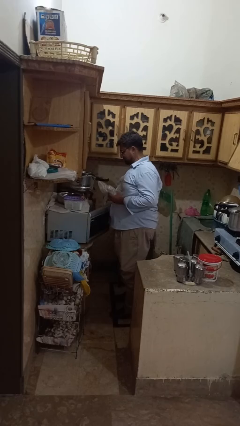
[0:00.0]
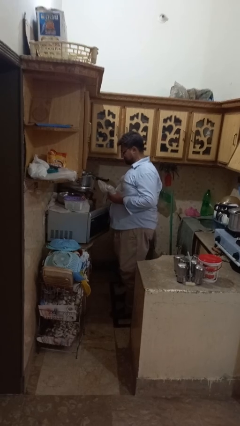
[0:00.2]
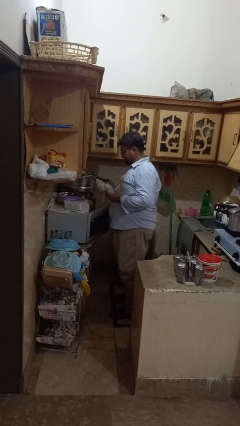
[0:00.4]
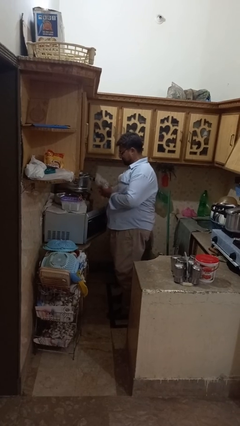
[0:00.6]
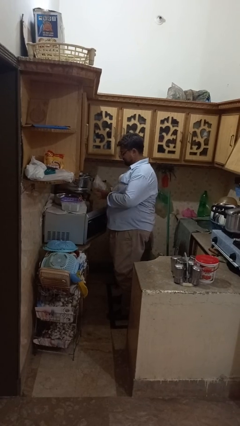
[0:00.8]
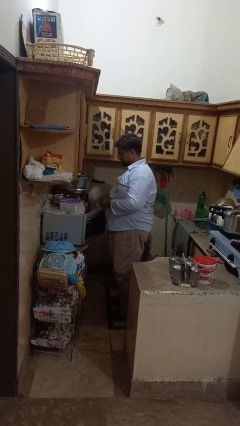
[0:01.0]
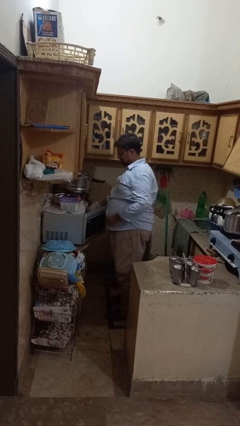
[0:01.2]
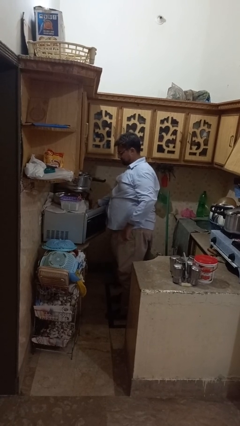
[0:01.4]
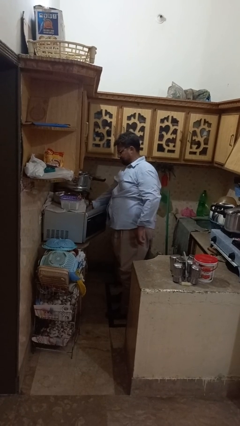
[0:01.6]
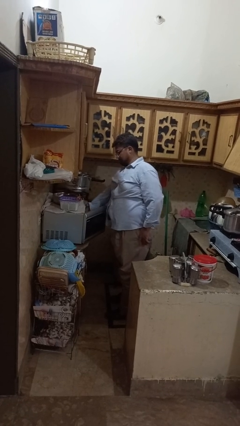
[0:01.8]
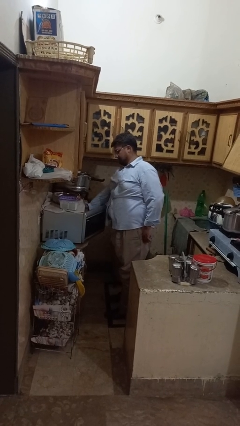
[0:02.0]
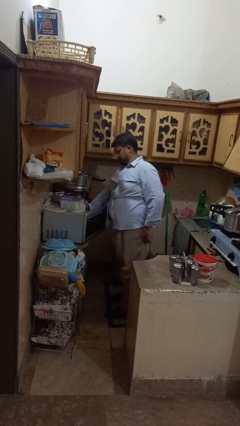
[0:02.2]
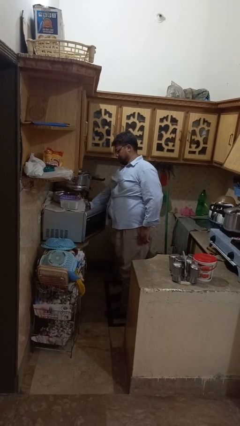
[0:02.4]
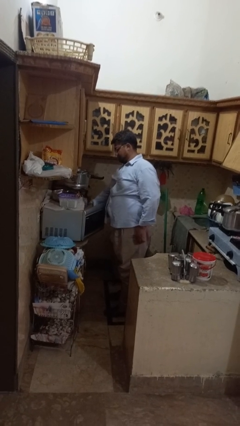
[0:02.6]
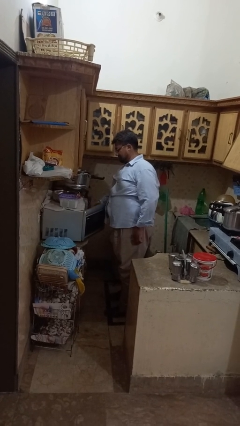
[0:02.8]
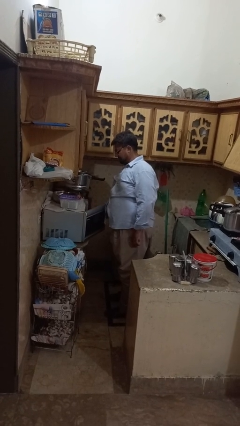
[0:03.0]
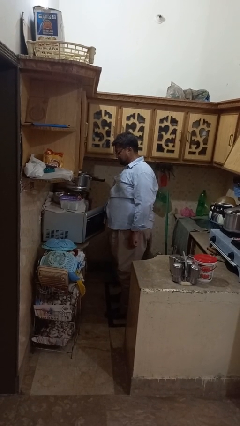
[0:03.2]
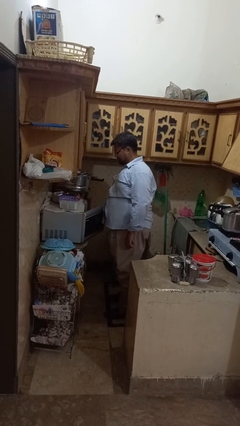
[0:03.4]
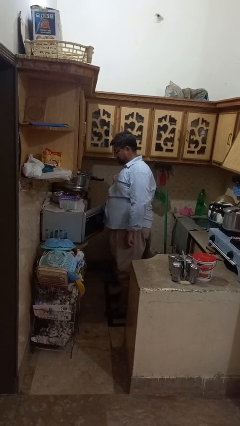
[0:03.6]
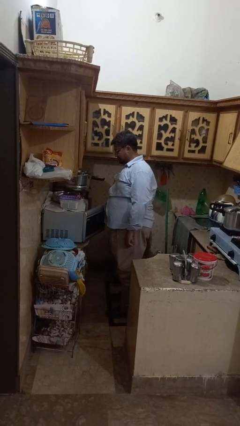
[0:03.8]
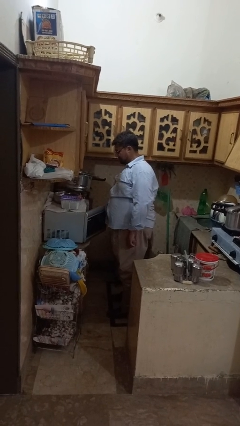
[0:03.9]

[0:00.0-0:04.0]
person puts object into microwave

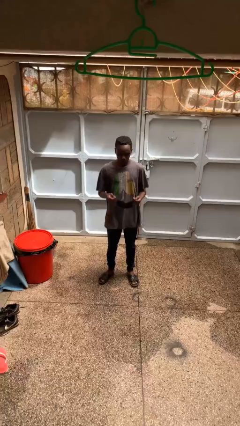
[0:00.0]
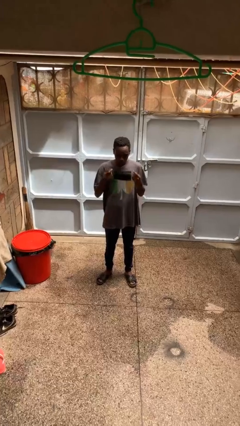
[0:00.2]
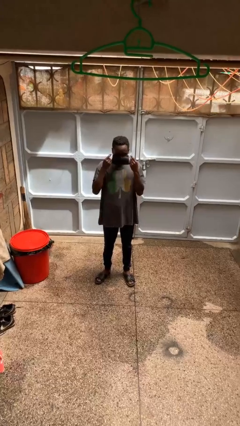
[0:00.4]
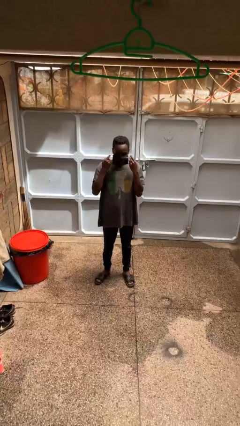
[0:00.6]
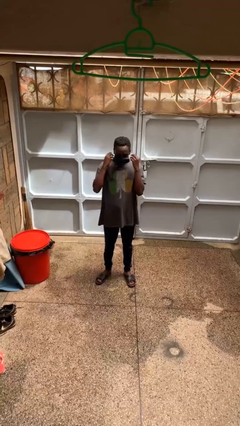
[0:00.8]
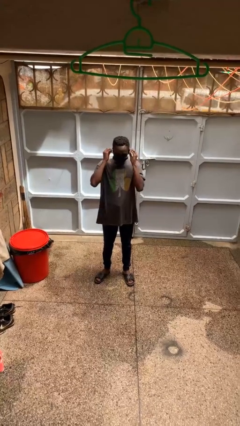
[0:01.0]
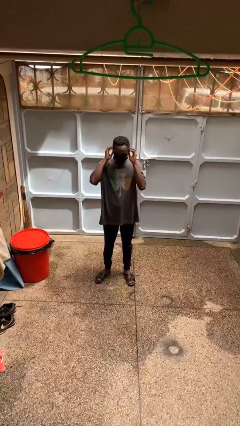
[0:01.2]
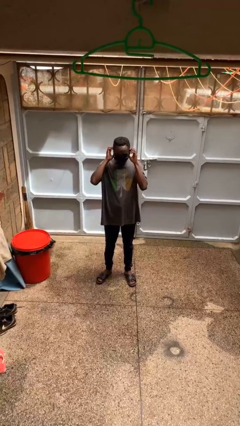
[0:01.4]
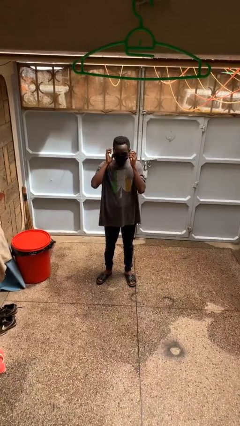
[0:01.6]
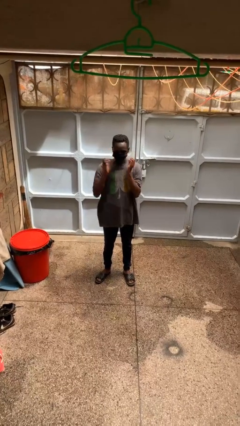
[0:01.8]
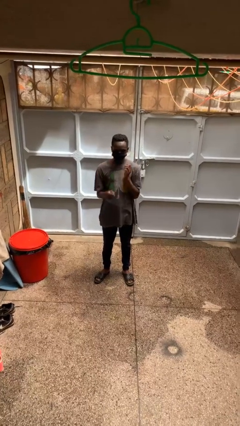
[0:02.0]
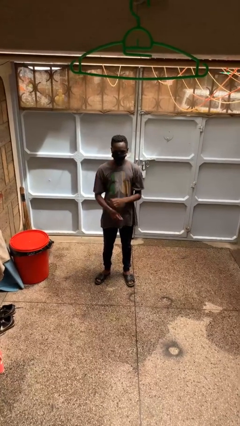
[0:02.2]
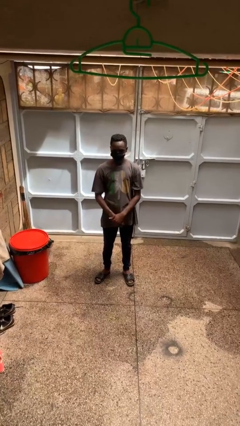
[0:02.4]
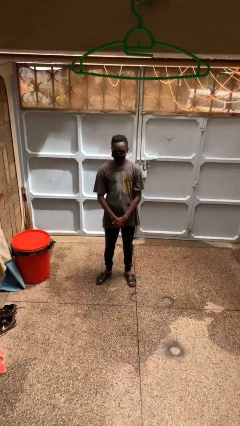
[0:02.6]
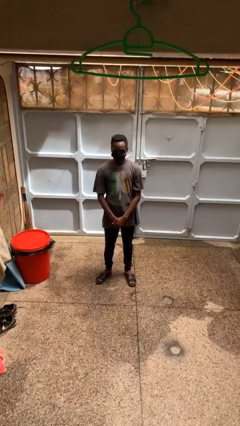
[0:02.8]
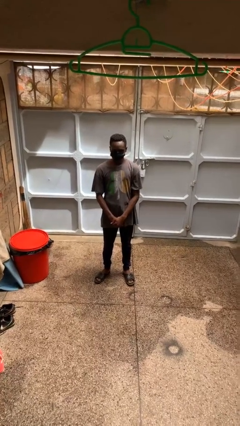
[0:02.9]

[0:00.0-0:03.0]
person puts on facemask

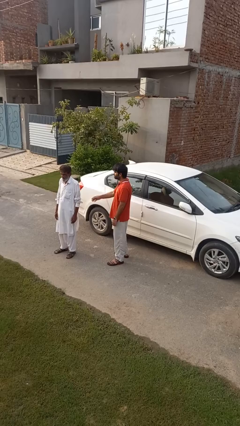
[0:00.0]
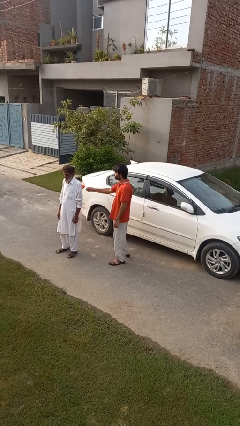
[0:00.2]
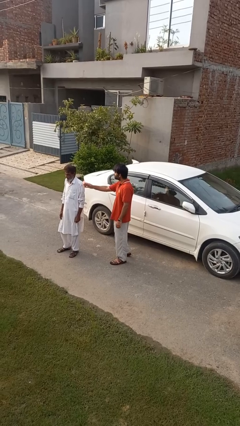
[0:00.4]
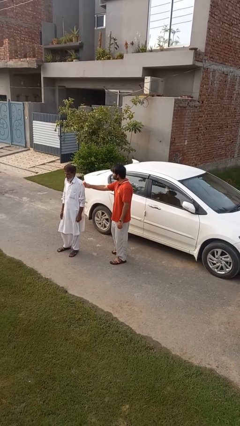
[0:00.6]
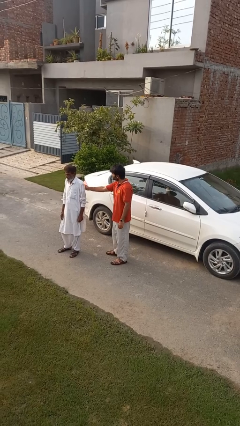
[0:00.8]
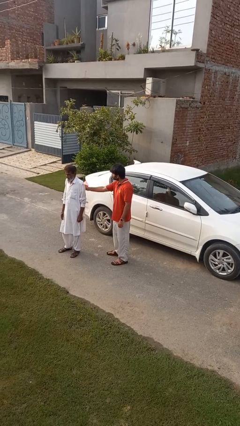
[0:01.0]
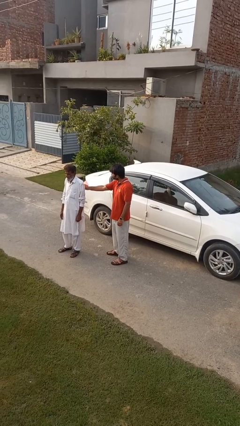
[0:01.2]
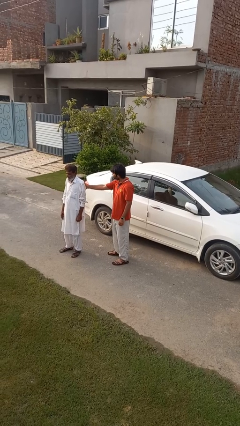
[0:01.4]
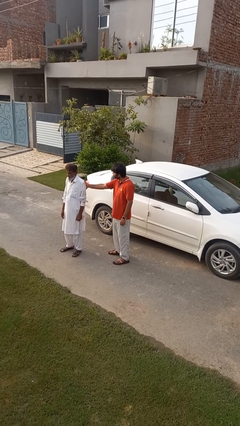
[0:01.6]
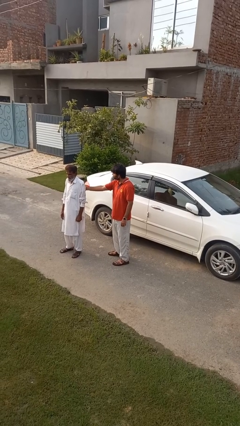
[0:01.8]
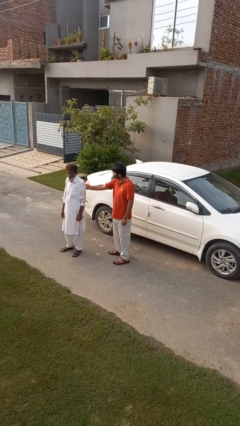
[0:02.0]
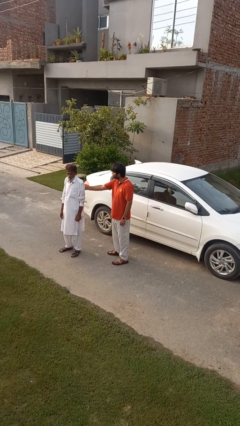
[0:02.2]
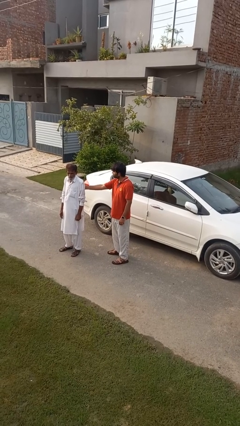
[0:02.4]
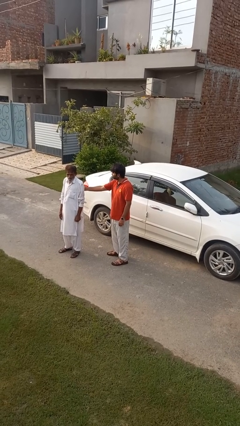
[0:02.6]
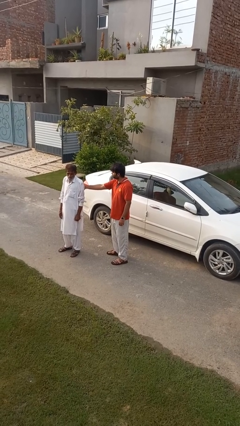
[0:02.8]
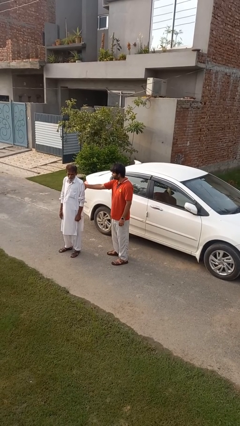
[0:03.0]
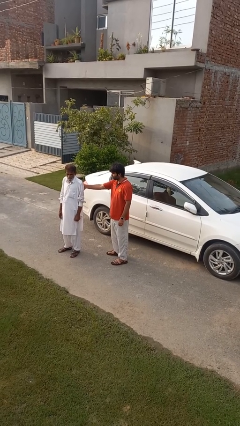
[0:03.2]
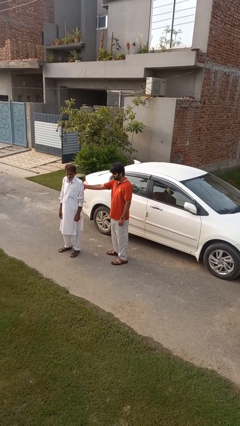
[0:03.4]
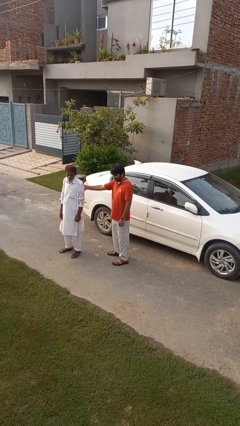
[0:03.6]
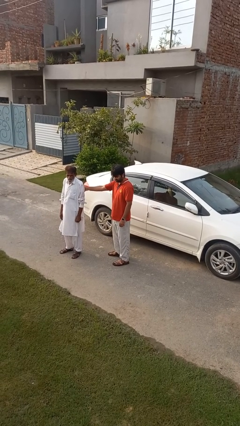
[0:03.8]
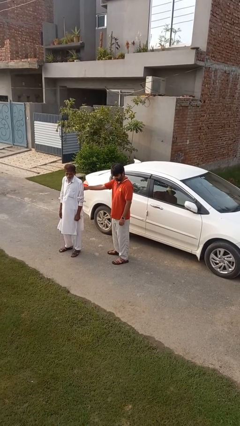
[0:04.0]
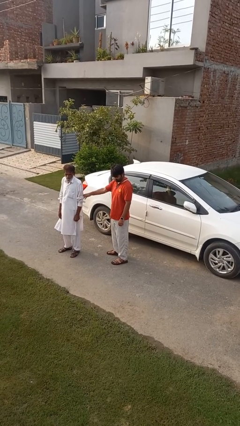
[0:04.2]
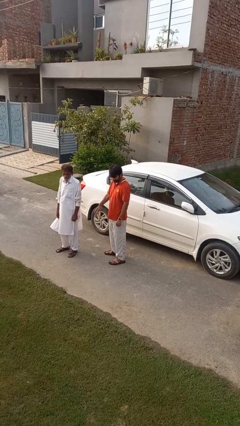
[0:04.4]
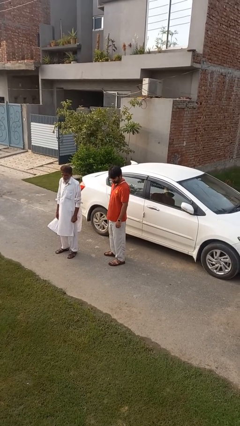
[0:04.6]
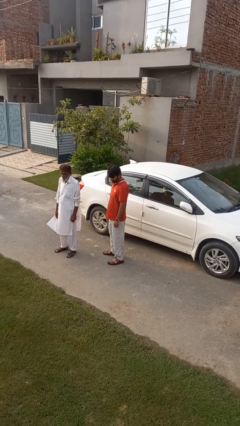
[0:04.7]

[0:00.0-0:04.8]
person touches back of person

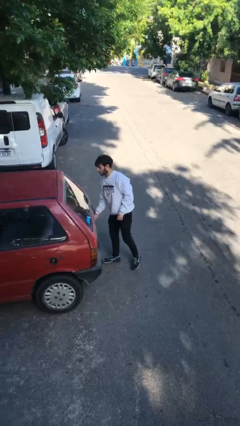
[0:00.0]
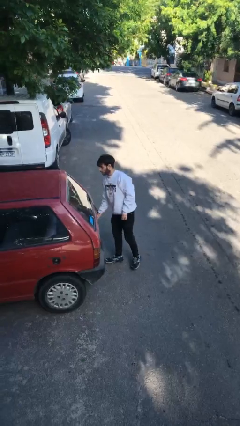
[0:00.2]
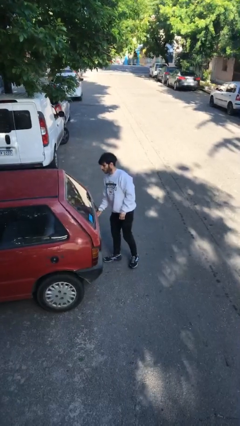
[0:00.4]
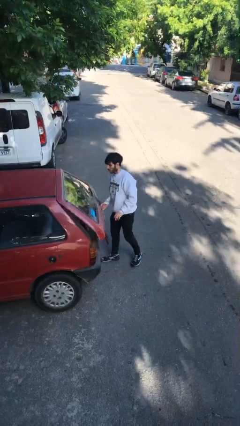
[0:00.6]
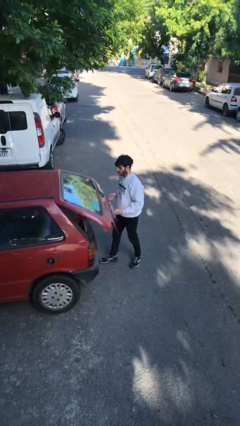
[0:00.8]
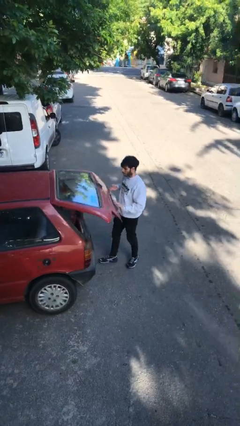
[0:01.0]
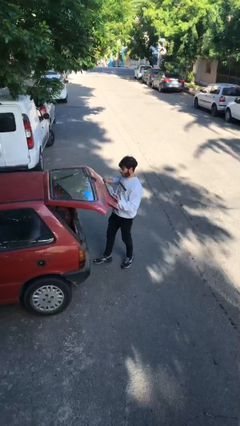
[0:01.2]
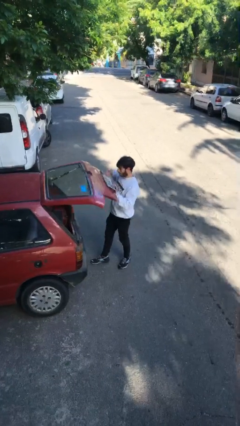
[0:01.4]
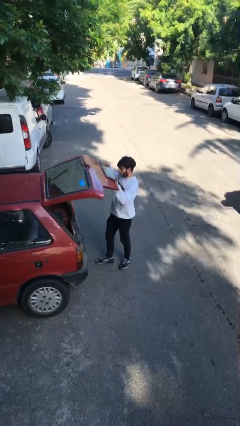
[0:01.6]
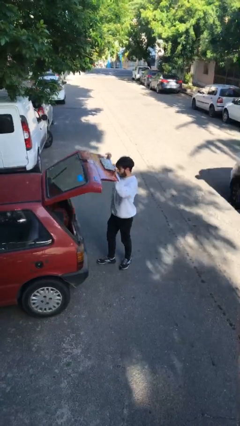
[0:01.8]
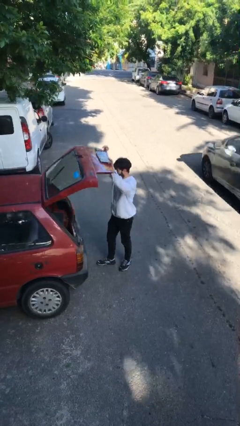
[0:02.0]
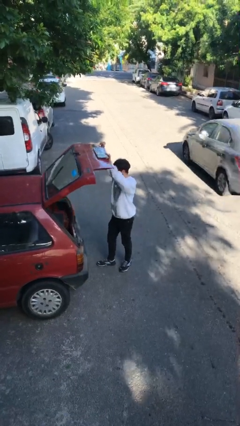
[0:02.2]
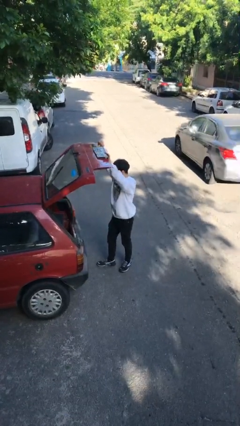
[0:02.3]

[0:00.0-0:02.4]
person opens car trunk

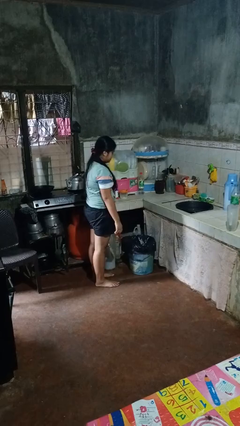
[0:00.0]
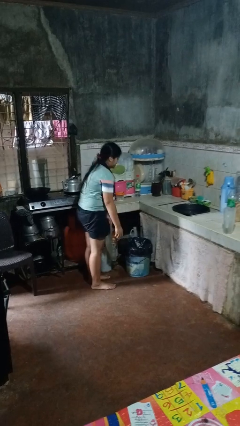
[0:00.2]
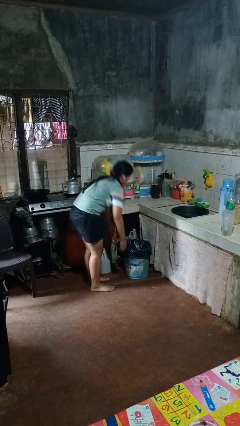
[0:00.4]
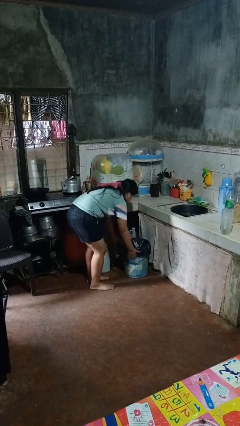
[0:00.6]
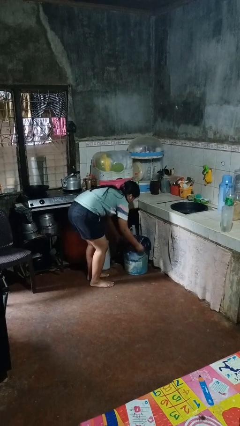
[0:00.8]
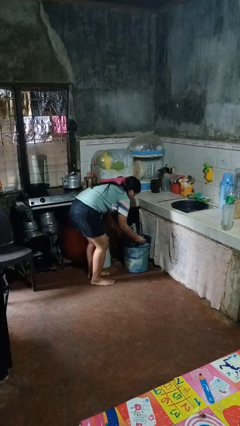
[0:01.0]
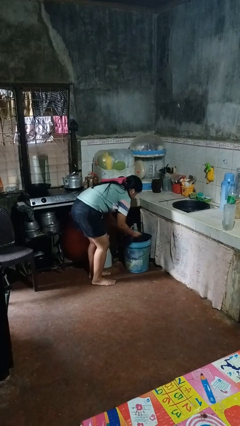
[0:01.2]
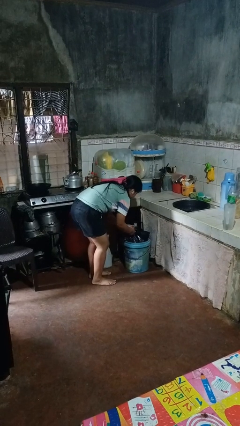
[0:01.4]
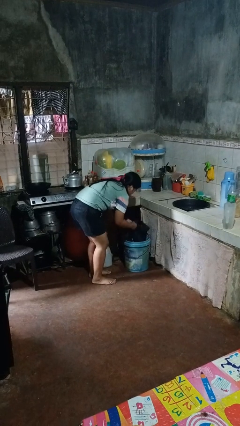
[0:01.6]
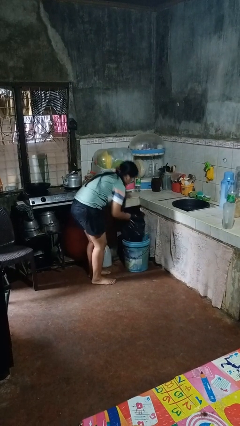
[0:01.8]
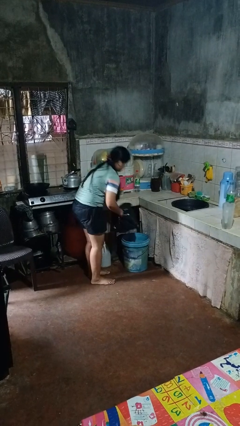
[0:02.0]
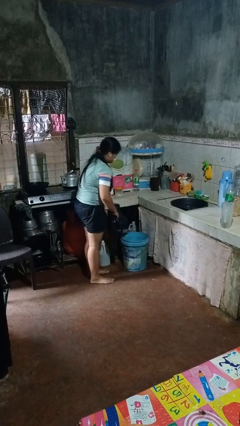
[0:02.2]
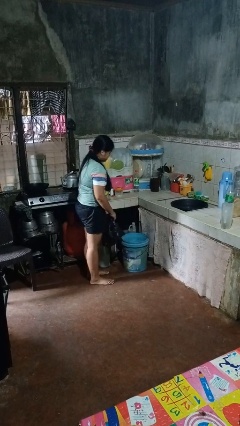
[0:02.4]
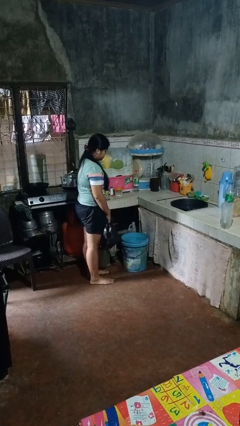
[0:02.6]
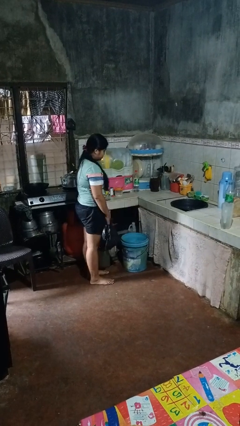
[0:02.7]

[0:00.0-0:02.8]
person removes trashbag from trashcan

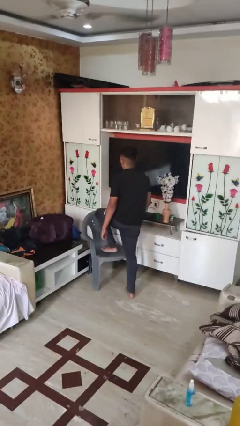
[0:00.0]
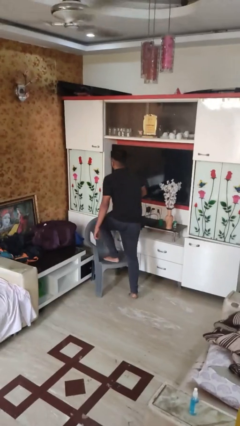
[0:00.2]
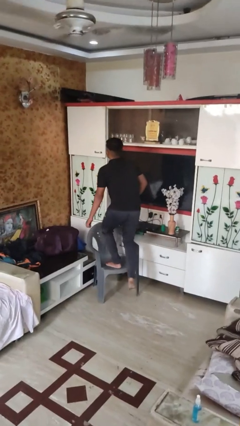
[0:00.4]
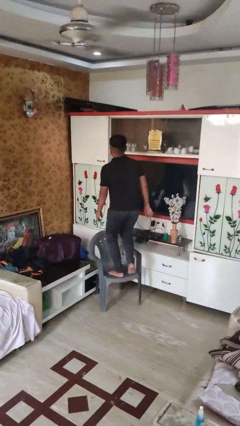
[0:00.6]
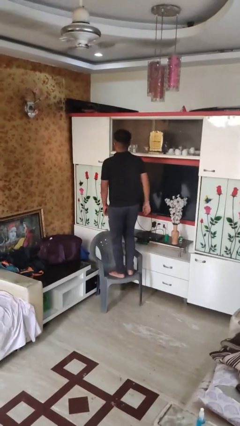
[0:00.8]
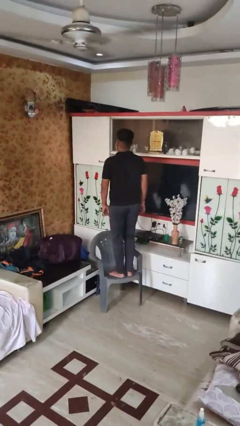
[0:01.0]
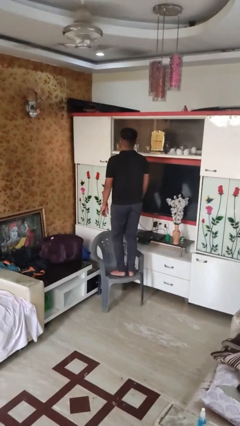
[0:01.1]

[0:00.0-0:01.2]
person climbs on chair
